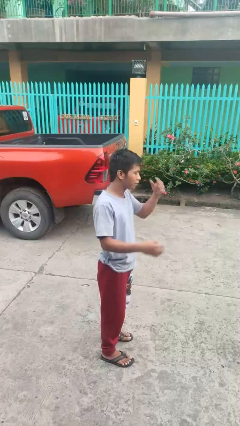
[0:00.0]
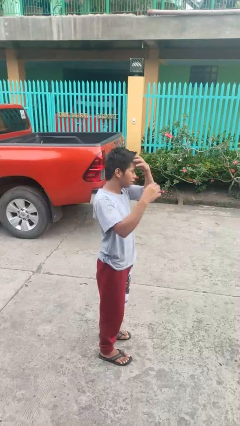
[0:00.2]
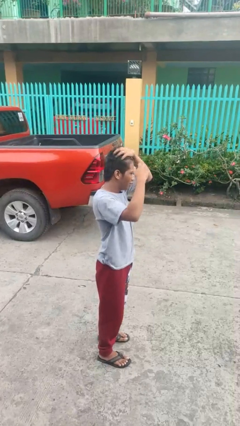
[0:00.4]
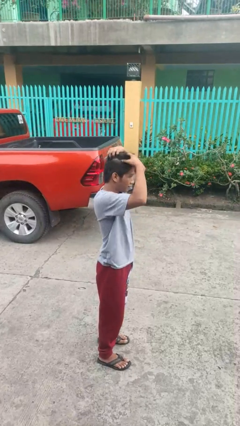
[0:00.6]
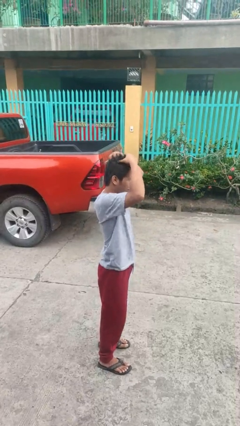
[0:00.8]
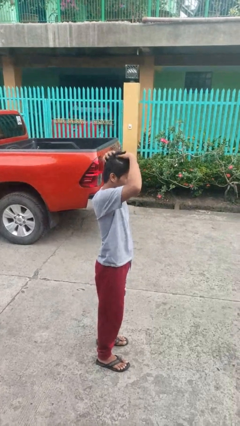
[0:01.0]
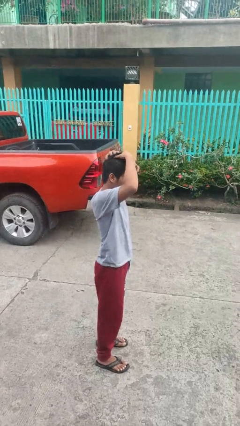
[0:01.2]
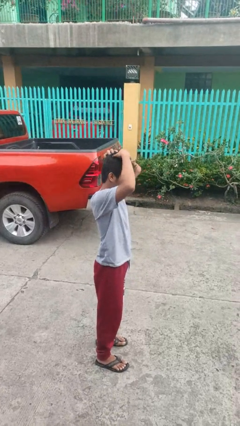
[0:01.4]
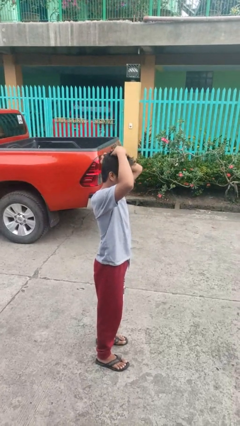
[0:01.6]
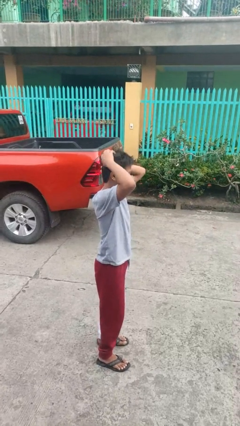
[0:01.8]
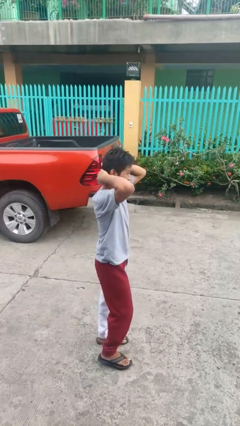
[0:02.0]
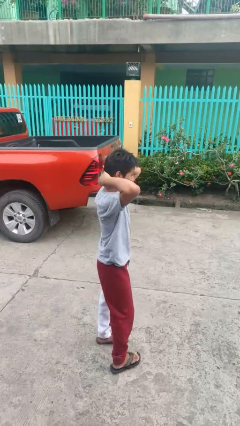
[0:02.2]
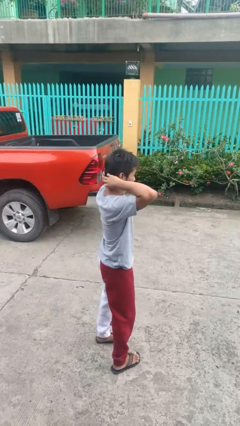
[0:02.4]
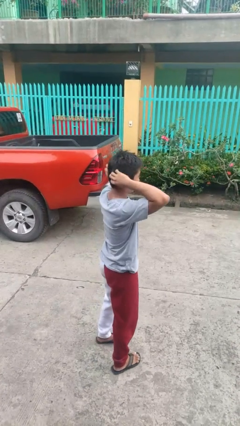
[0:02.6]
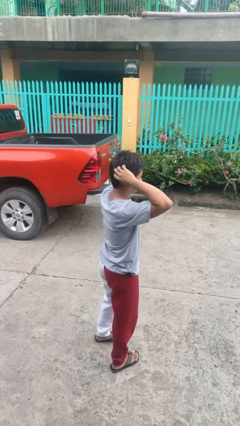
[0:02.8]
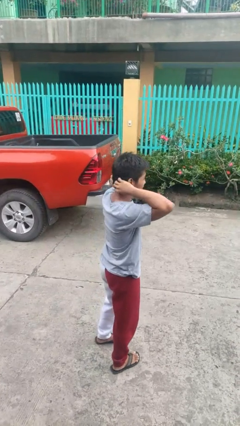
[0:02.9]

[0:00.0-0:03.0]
person scratches face

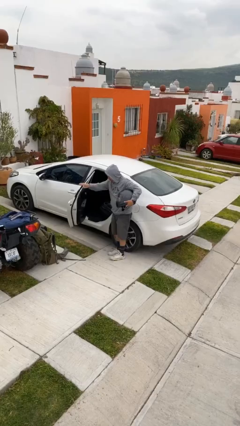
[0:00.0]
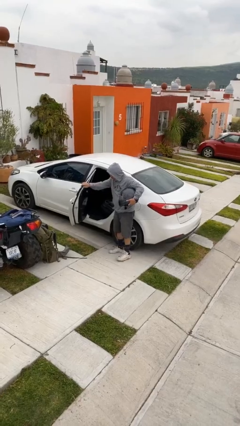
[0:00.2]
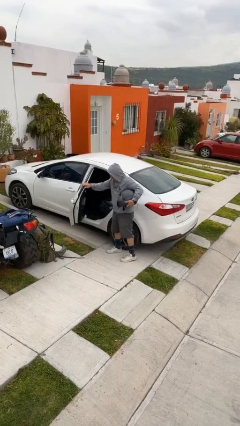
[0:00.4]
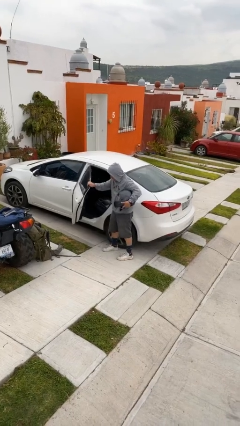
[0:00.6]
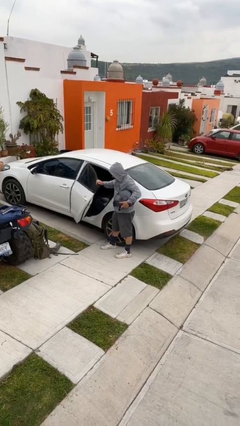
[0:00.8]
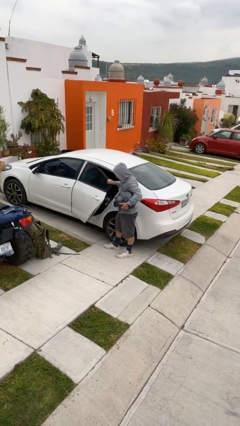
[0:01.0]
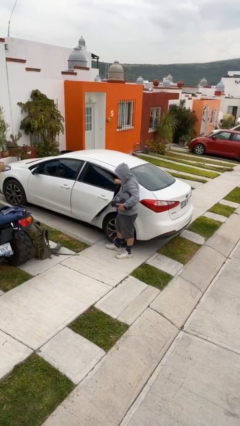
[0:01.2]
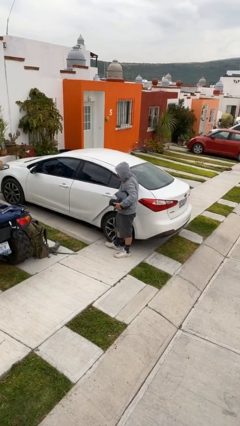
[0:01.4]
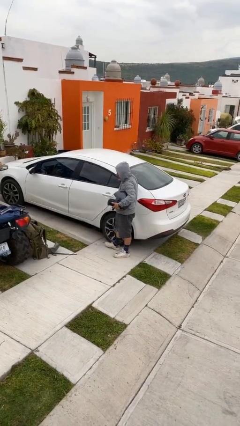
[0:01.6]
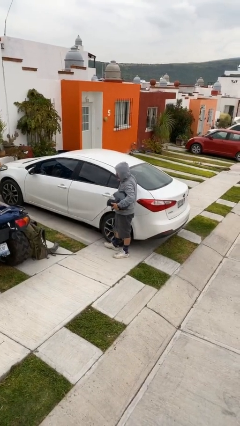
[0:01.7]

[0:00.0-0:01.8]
person closes car door

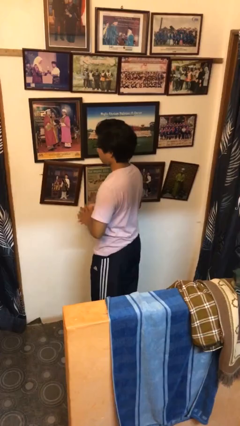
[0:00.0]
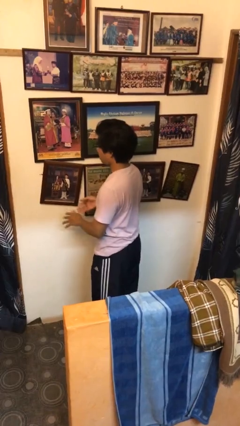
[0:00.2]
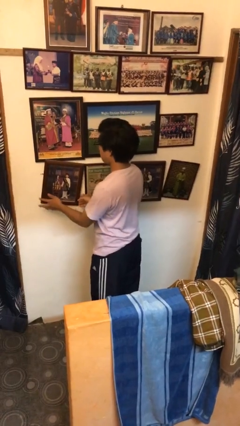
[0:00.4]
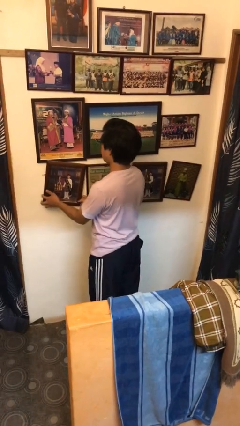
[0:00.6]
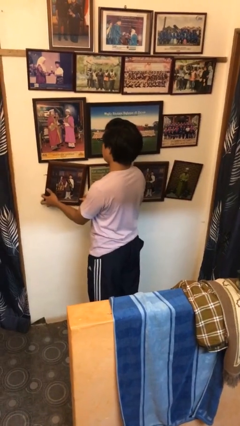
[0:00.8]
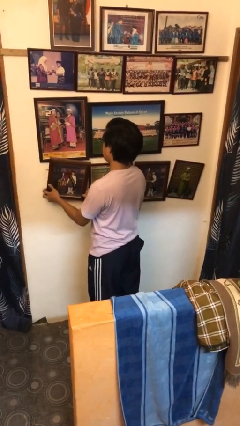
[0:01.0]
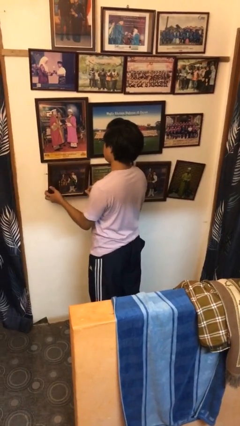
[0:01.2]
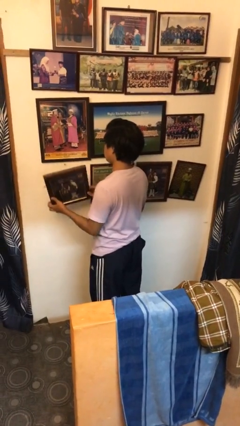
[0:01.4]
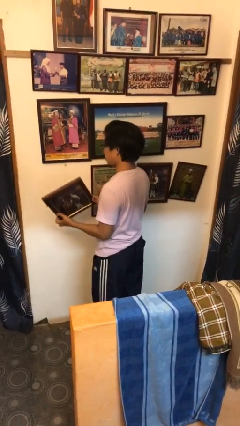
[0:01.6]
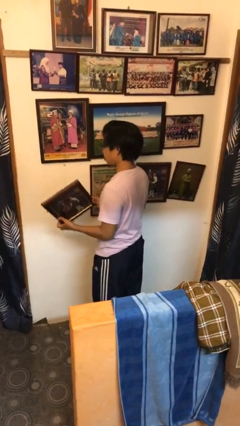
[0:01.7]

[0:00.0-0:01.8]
person takes down picture frame

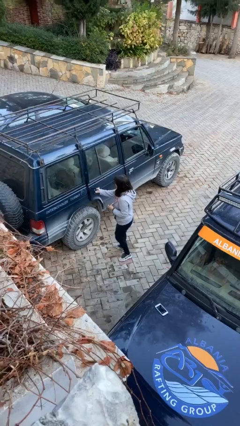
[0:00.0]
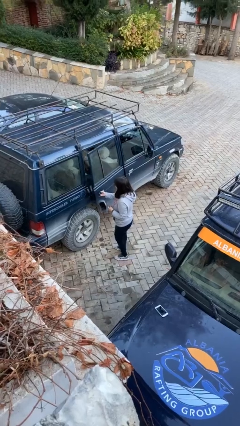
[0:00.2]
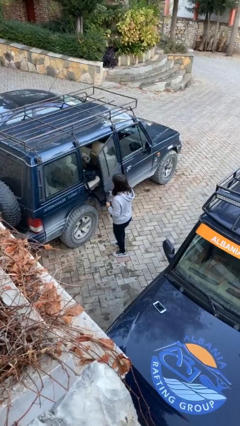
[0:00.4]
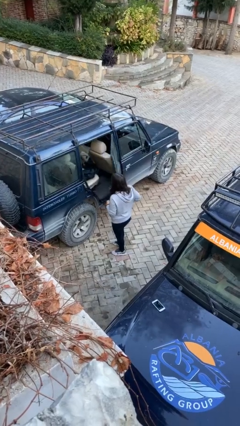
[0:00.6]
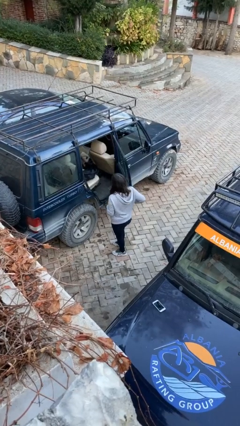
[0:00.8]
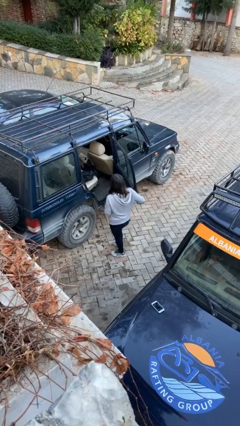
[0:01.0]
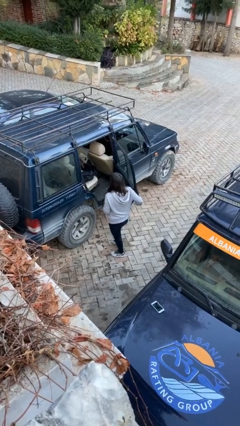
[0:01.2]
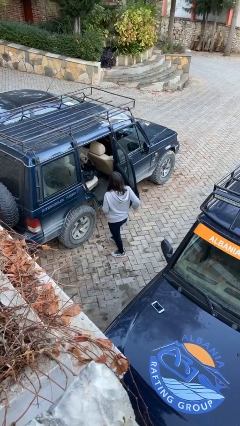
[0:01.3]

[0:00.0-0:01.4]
person opens car door

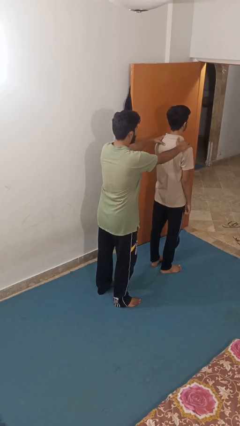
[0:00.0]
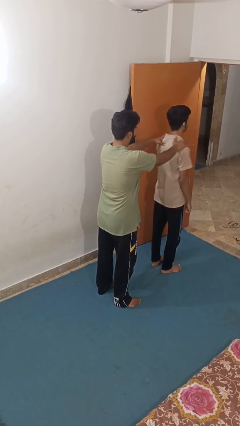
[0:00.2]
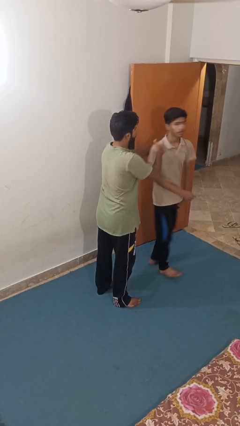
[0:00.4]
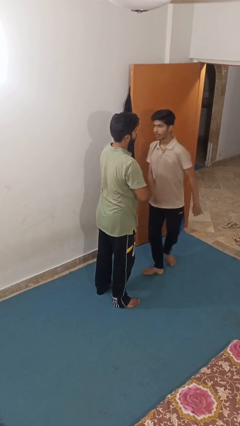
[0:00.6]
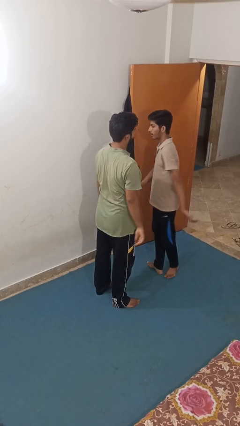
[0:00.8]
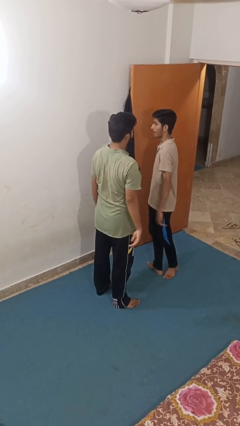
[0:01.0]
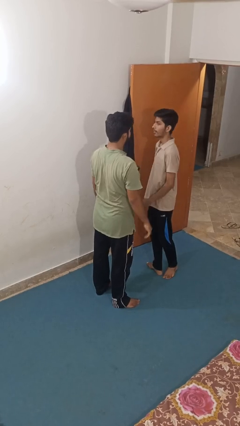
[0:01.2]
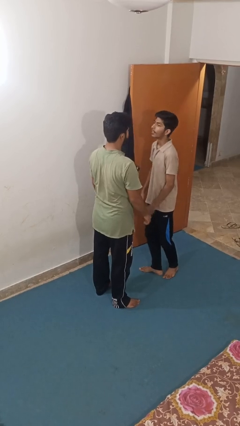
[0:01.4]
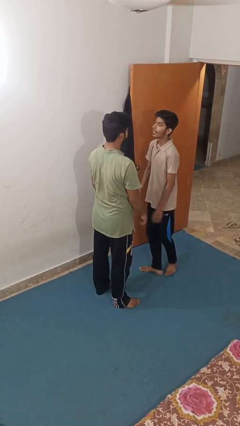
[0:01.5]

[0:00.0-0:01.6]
person spins person around

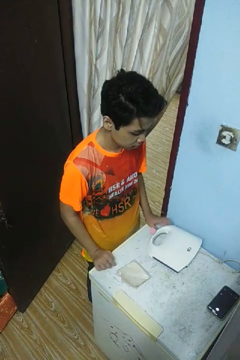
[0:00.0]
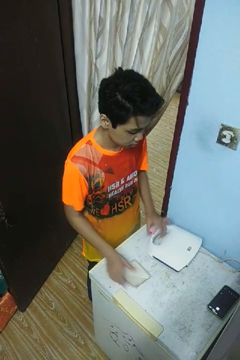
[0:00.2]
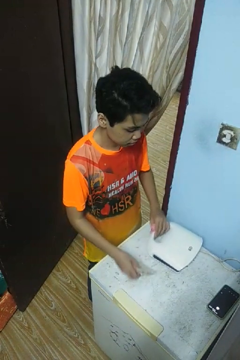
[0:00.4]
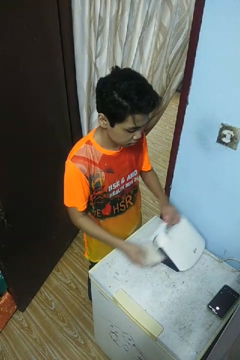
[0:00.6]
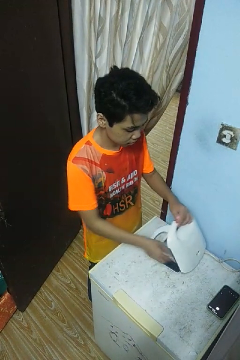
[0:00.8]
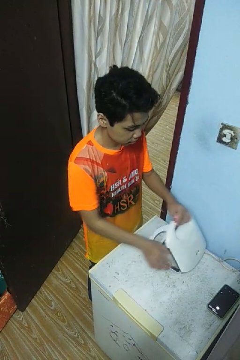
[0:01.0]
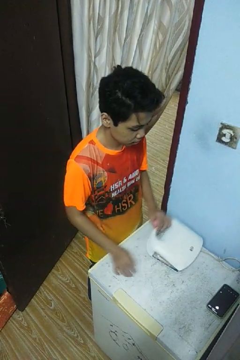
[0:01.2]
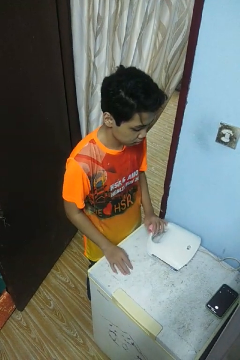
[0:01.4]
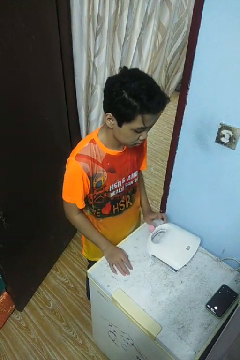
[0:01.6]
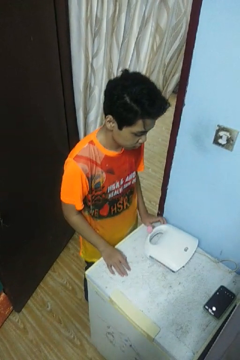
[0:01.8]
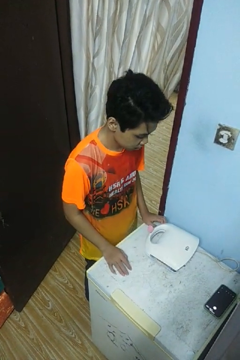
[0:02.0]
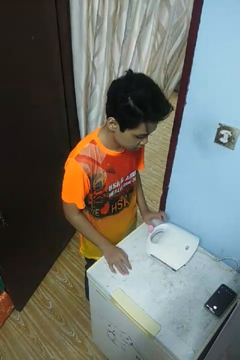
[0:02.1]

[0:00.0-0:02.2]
person puts object into toaster

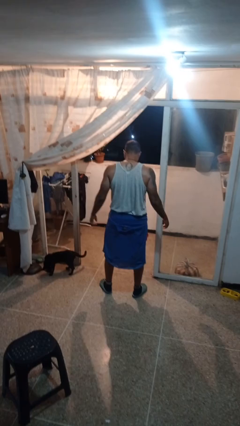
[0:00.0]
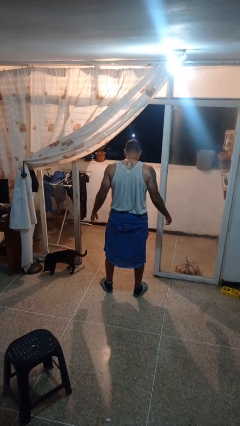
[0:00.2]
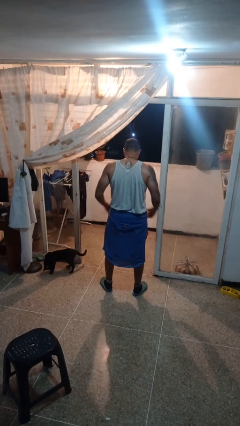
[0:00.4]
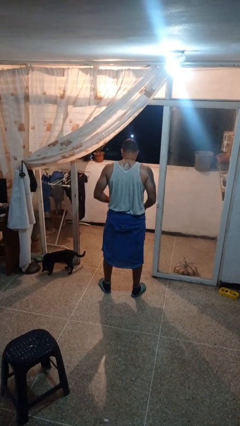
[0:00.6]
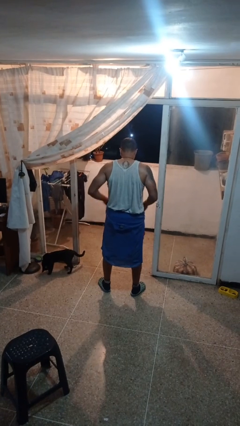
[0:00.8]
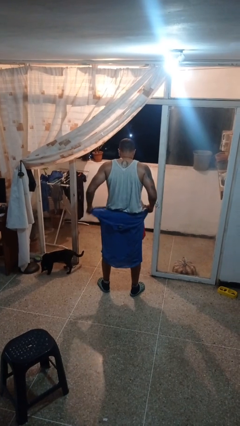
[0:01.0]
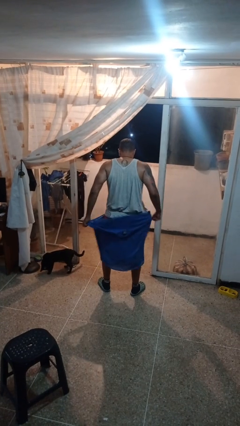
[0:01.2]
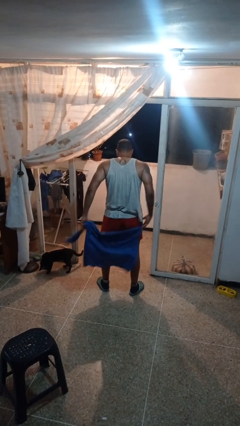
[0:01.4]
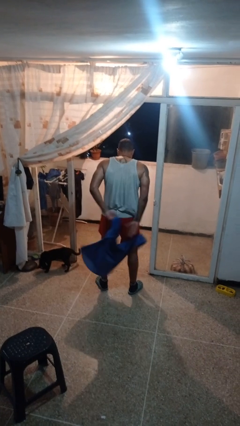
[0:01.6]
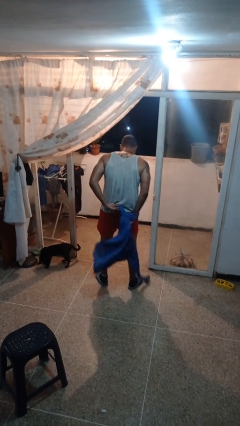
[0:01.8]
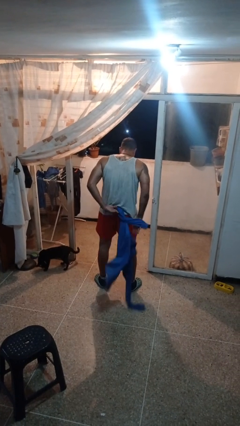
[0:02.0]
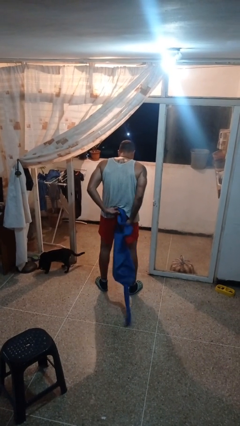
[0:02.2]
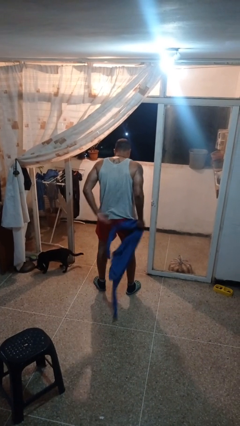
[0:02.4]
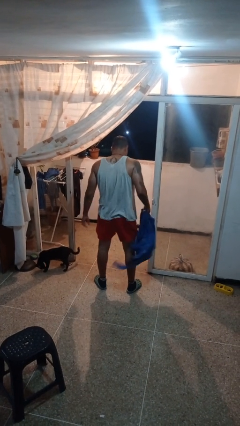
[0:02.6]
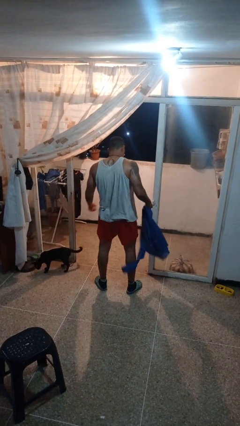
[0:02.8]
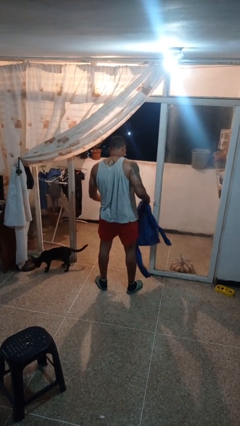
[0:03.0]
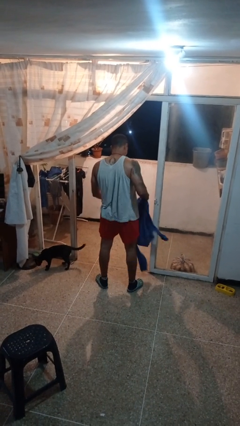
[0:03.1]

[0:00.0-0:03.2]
person unties jacket around waist

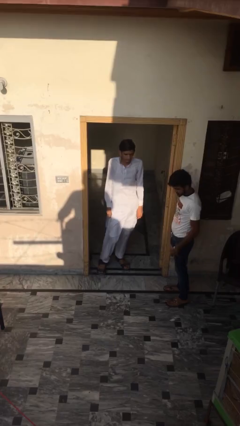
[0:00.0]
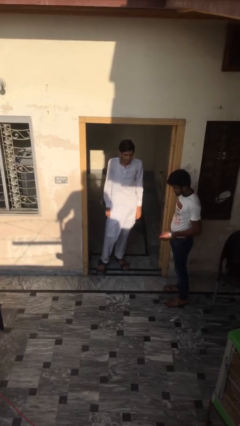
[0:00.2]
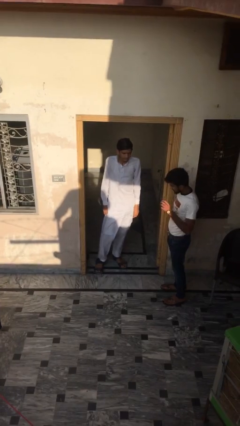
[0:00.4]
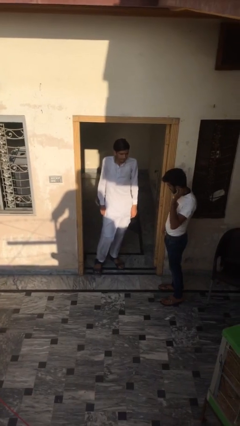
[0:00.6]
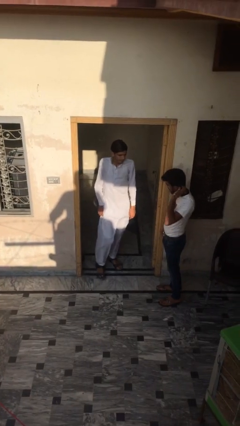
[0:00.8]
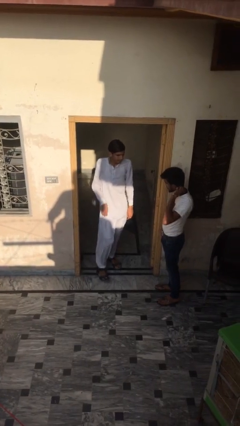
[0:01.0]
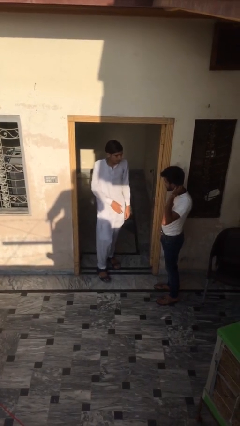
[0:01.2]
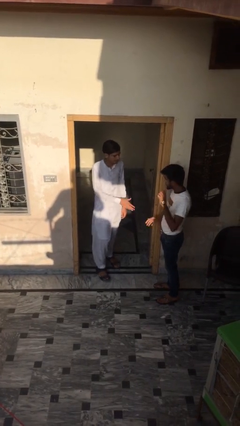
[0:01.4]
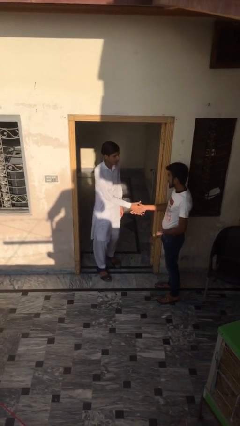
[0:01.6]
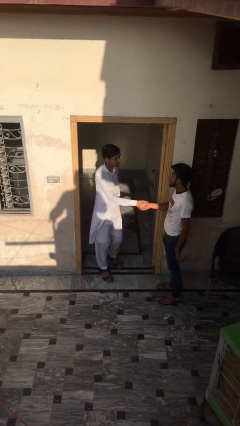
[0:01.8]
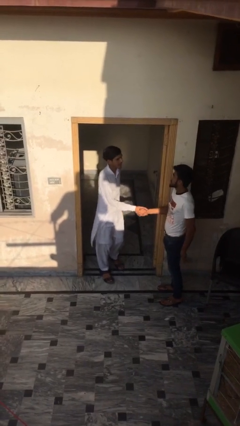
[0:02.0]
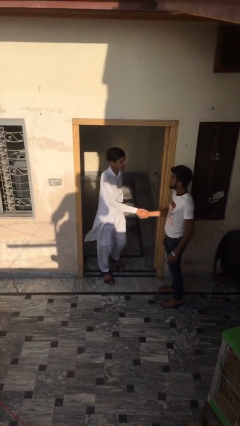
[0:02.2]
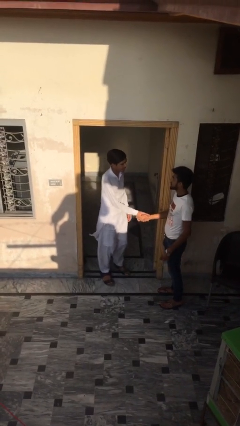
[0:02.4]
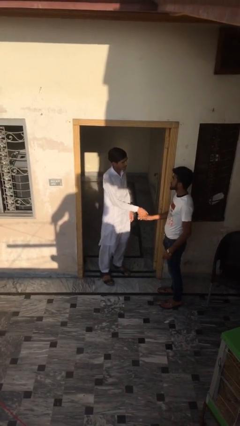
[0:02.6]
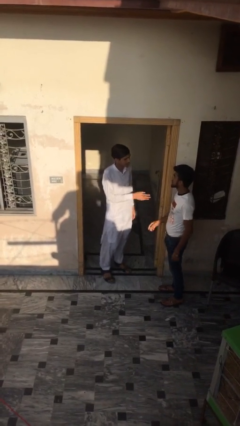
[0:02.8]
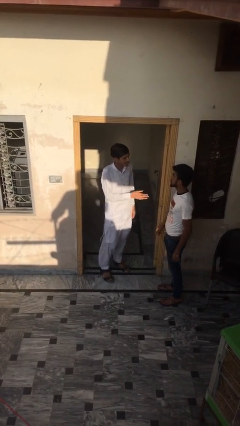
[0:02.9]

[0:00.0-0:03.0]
person shakes hand
